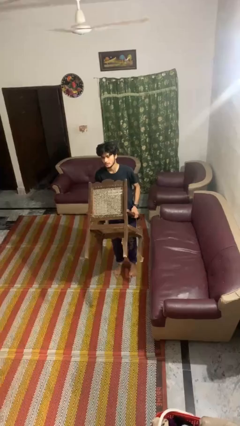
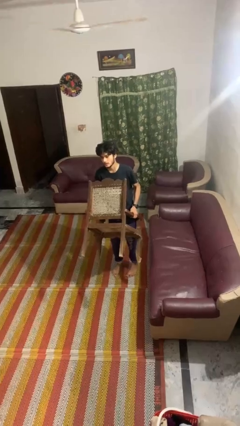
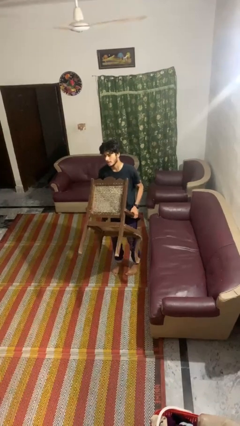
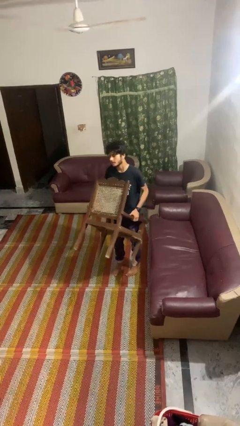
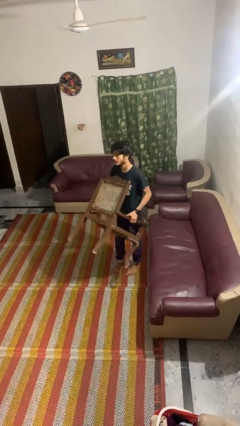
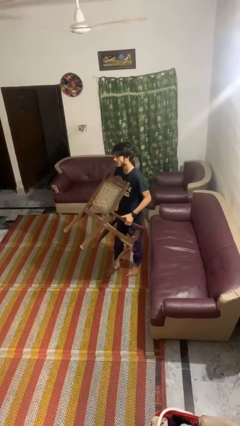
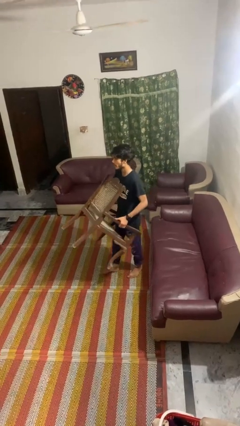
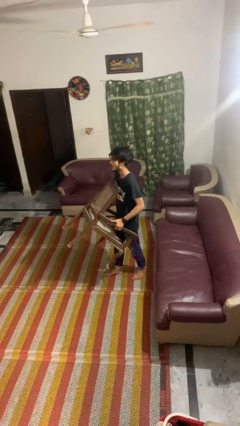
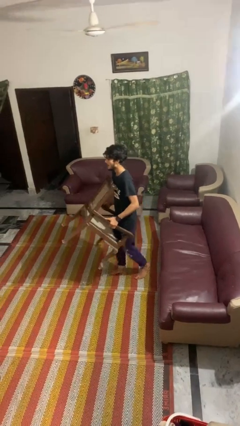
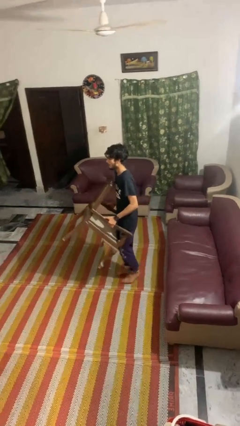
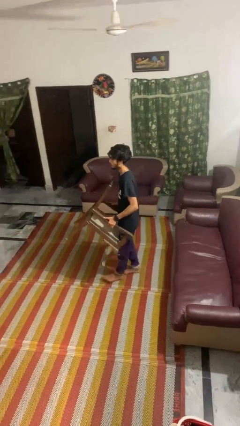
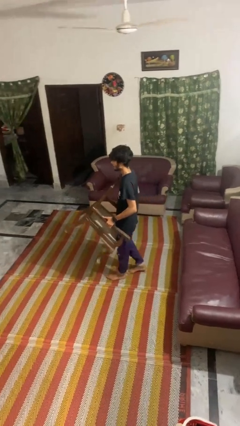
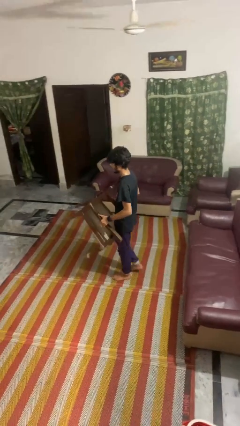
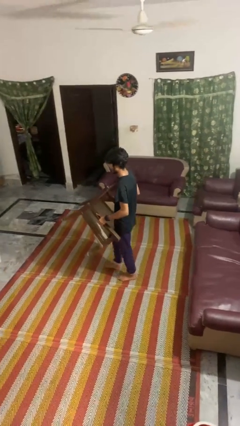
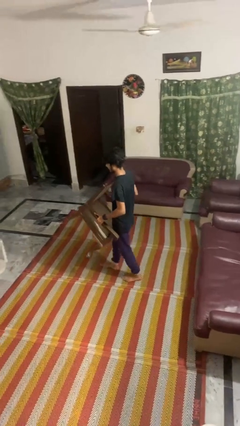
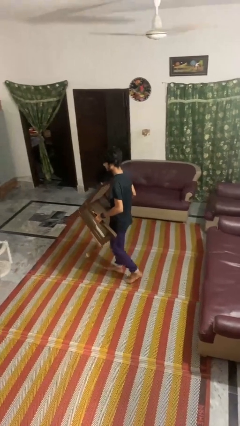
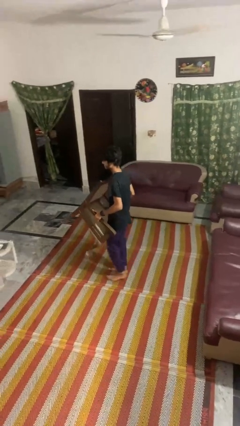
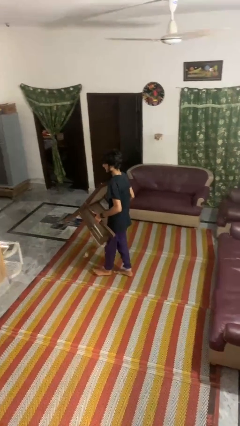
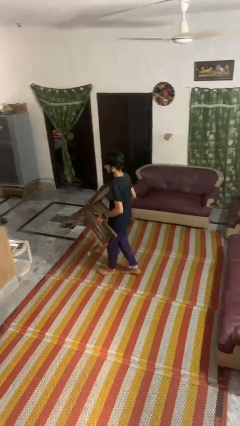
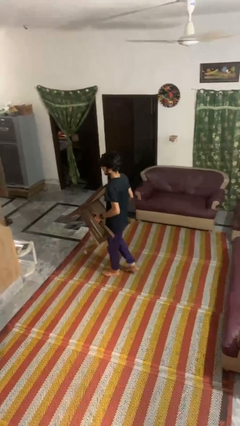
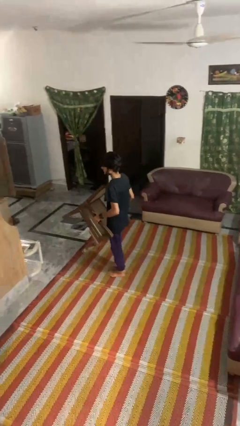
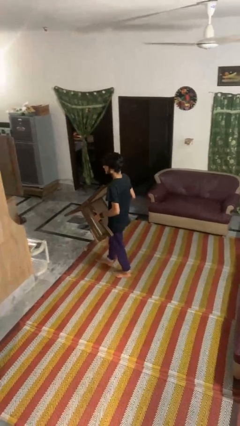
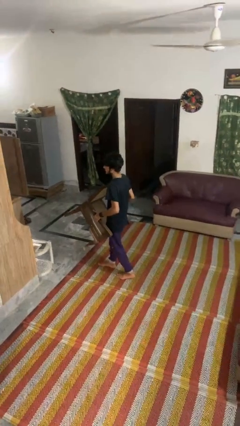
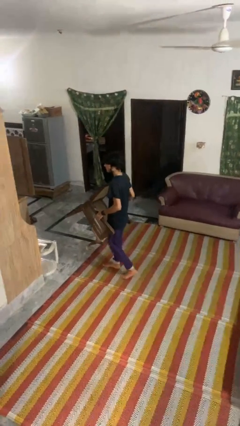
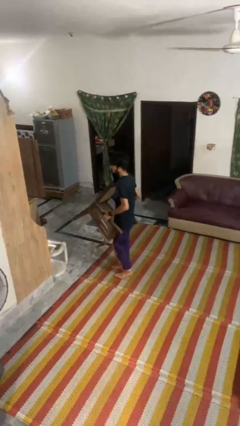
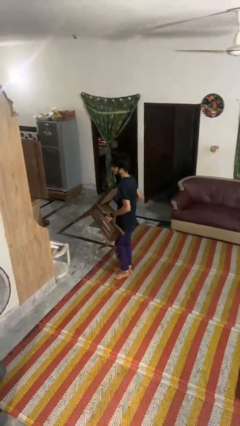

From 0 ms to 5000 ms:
person carries furniture

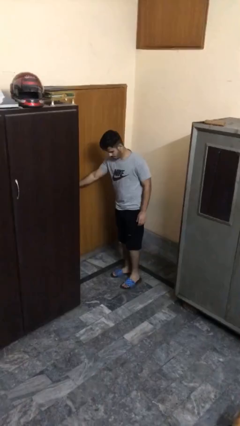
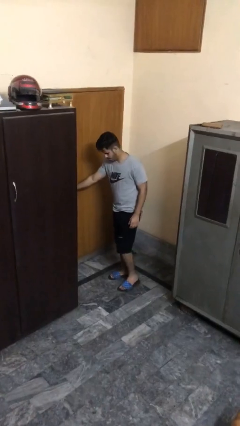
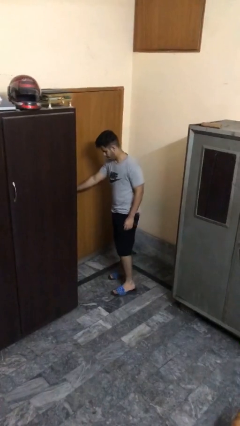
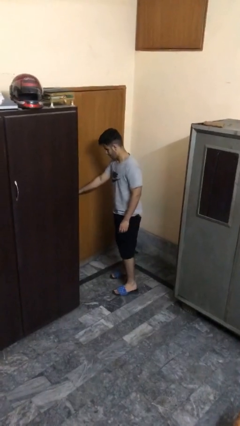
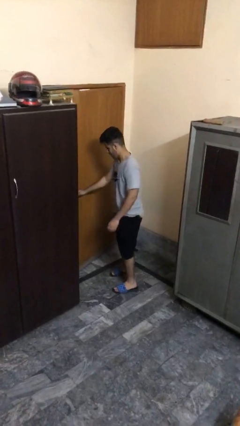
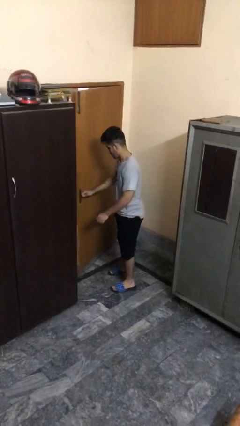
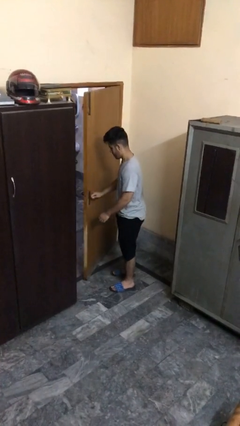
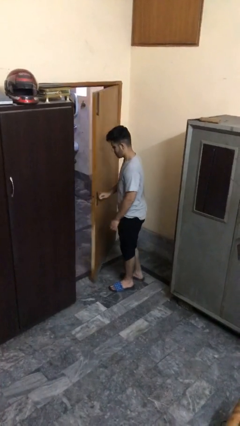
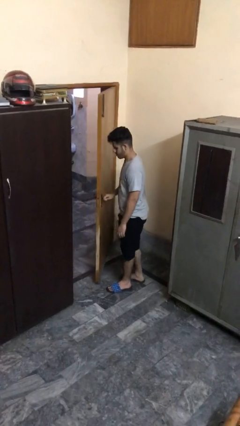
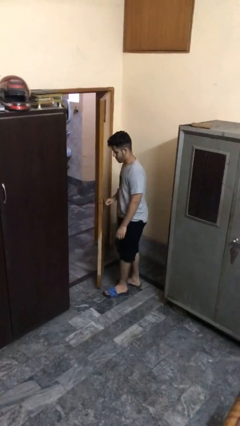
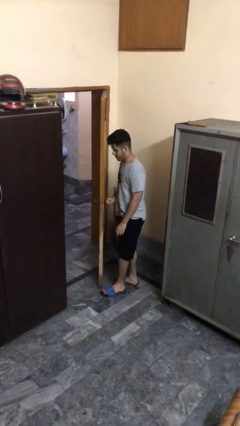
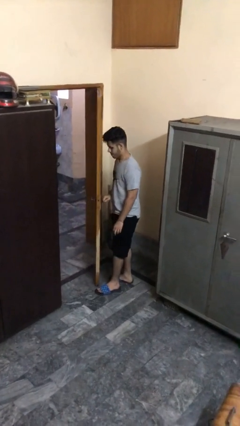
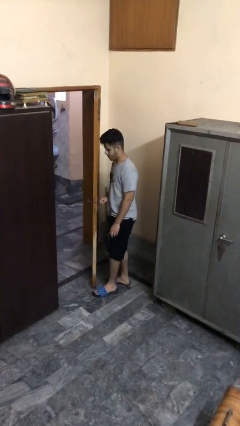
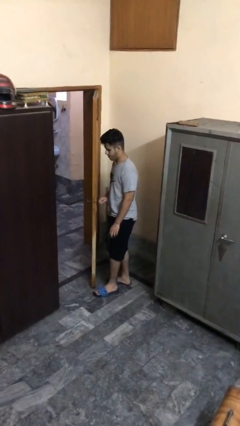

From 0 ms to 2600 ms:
person opens facility door

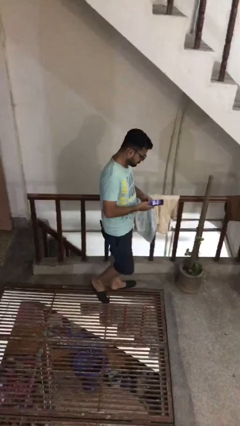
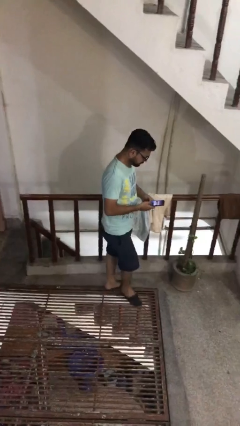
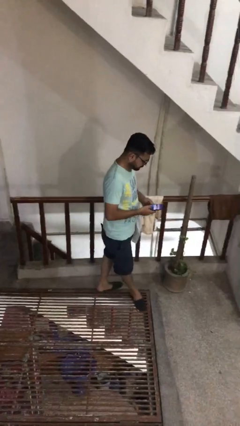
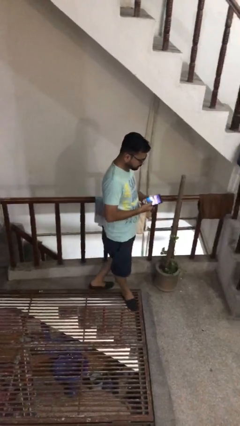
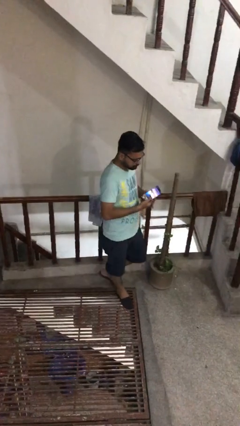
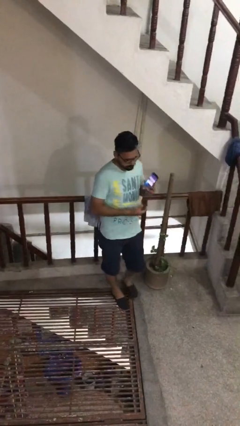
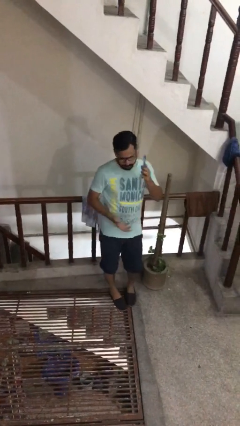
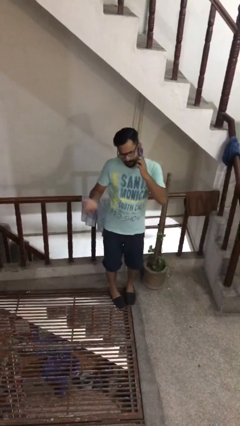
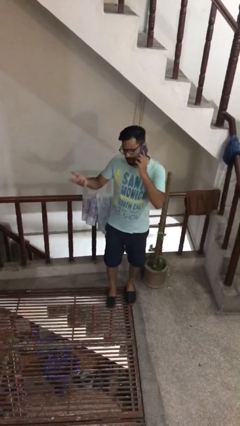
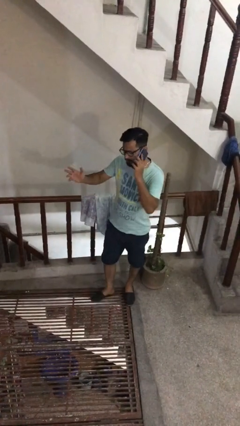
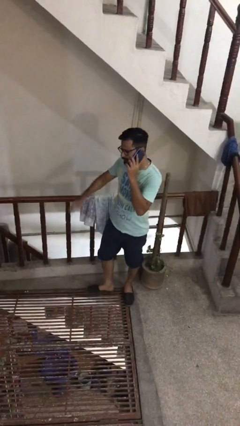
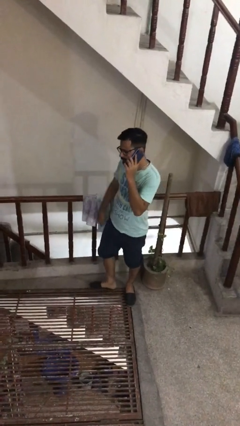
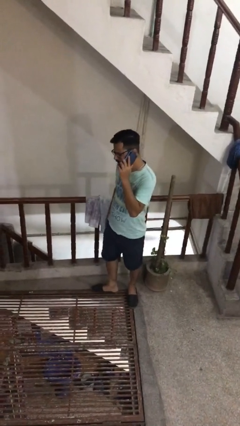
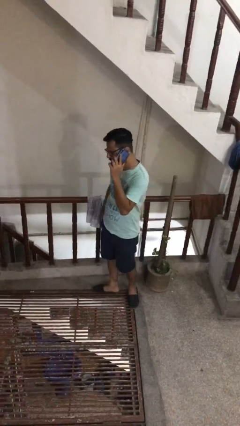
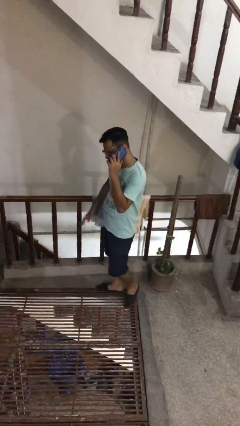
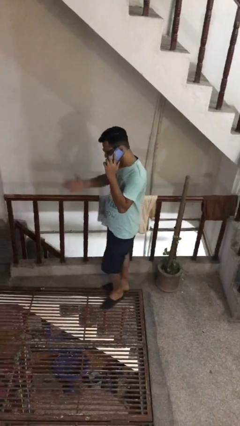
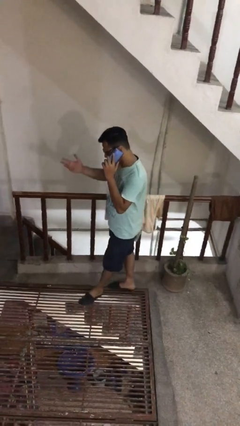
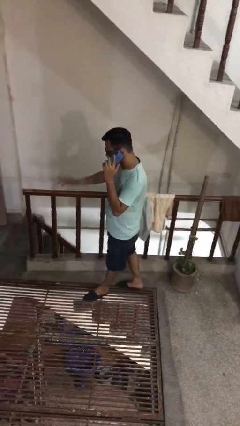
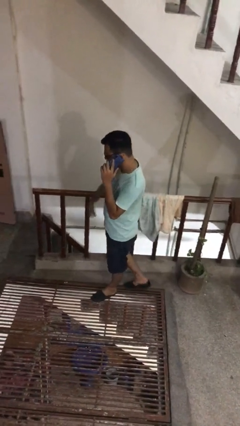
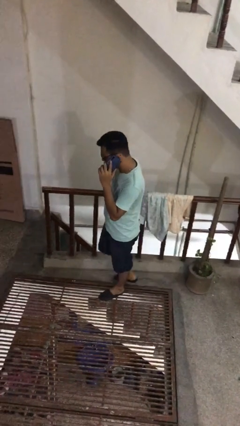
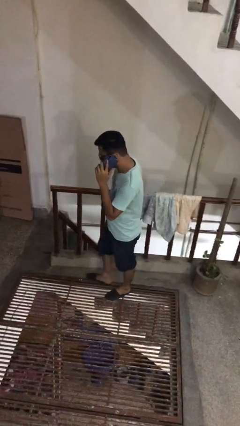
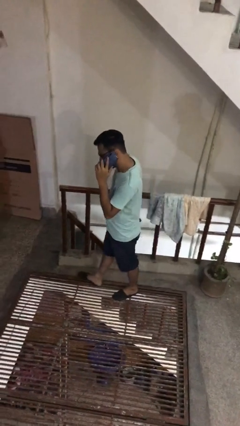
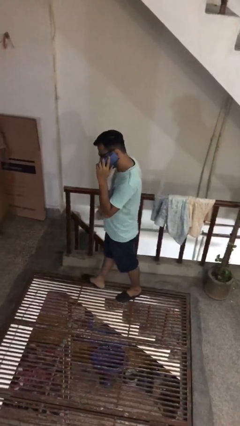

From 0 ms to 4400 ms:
person talks on phone

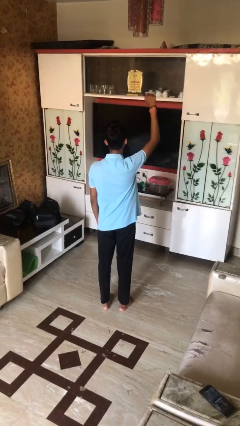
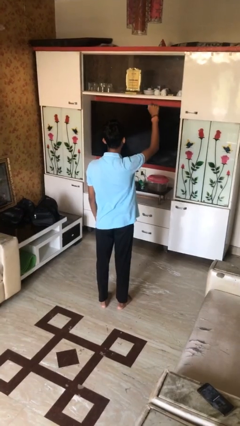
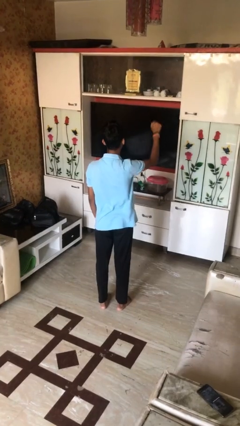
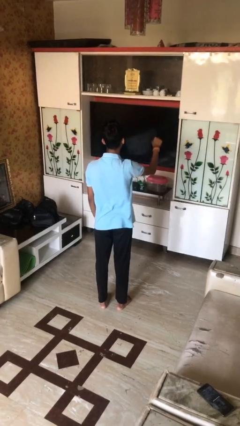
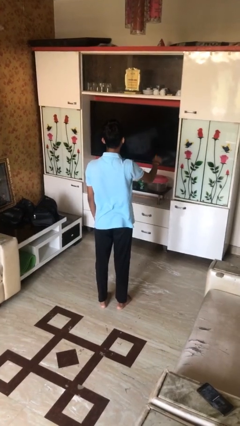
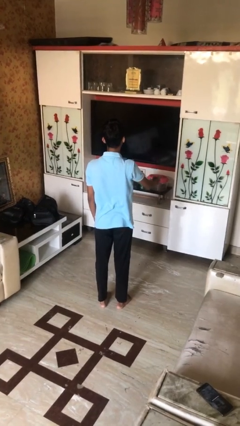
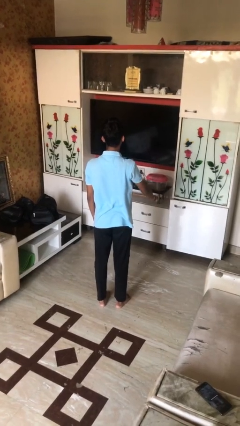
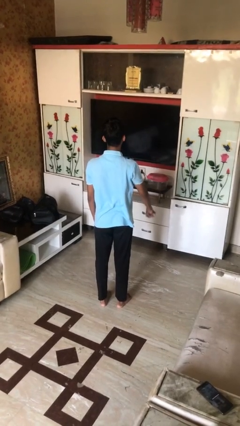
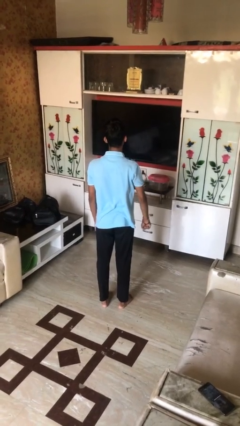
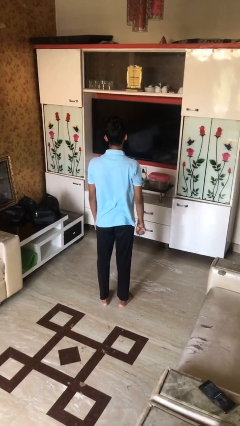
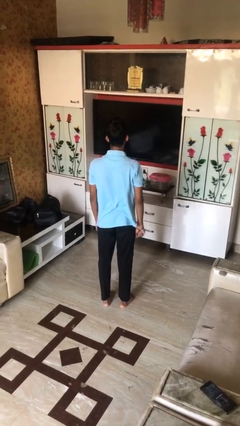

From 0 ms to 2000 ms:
person gestures lower hand

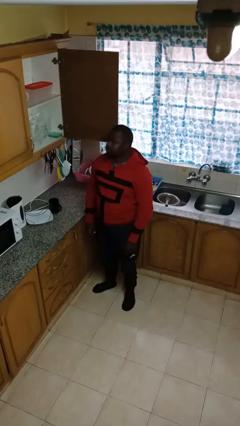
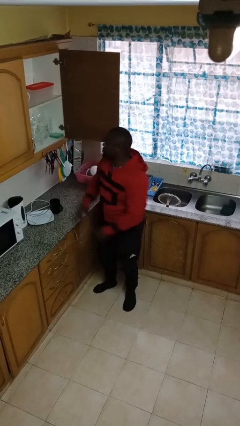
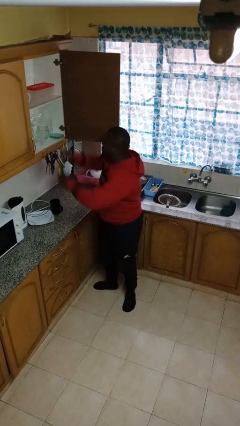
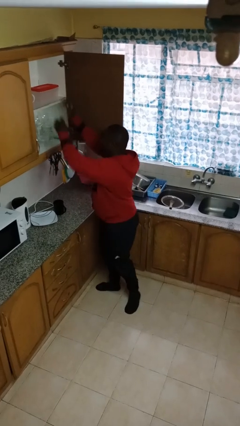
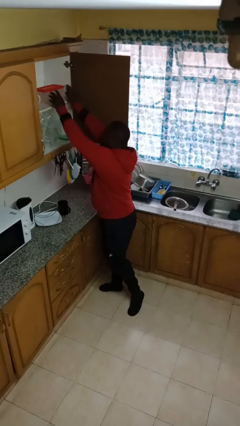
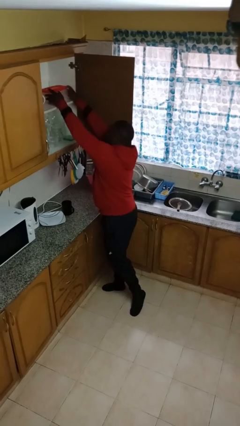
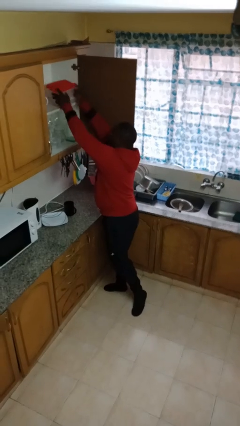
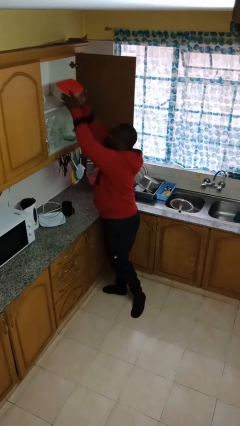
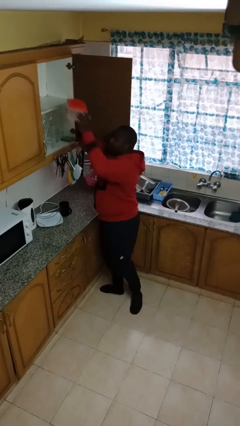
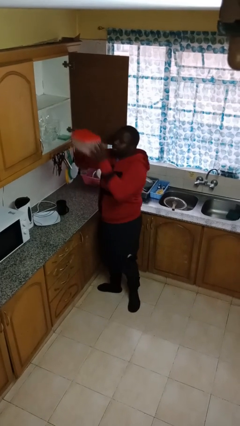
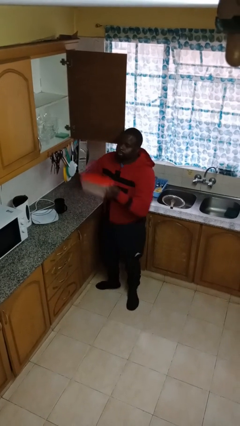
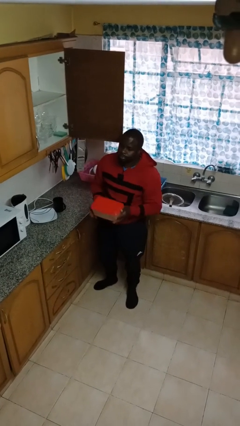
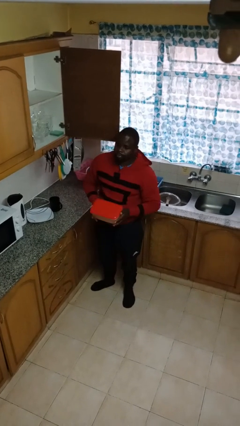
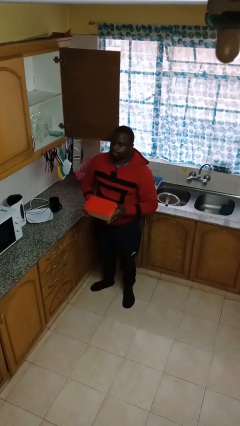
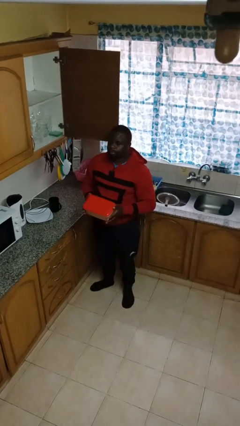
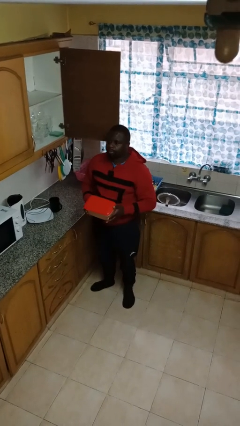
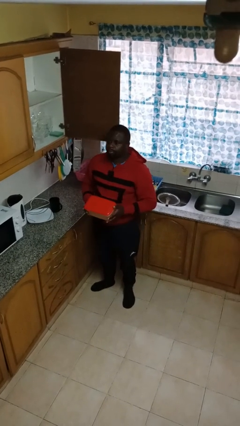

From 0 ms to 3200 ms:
person picks up object from cabinet

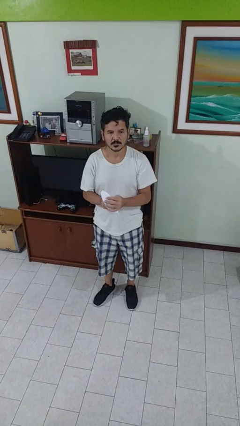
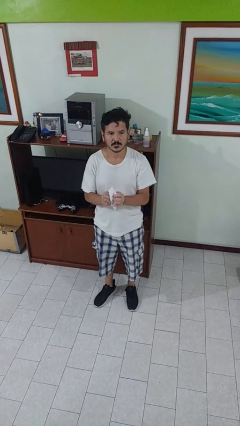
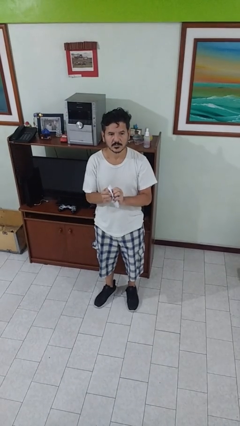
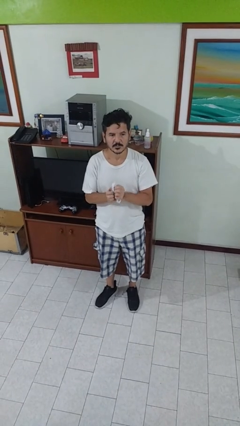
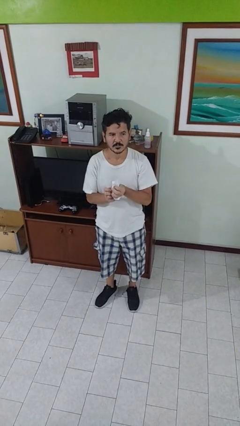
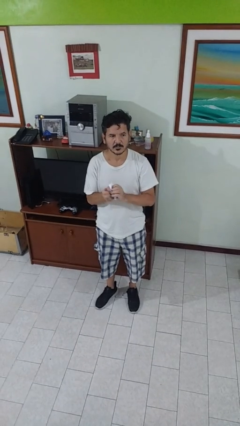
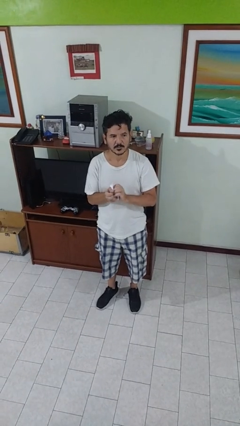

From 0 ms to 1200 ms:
person crumples paper
